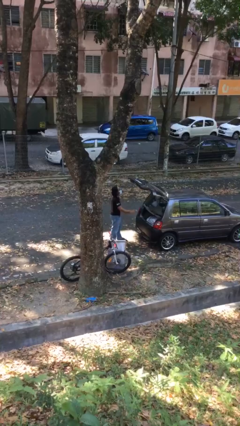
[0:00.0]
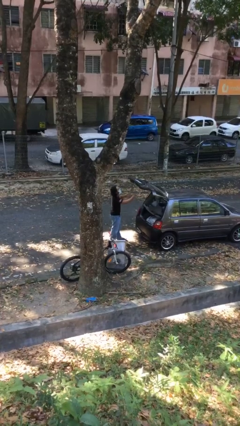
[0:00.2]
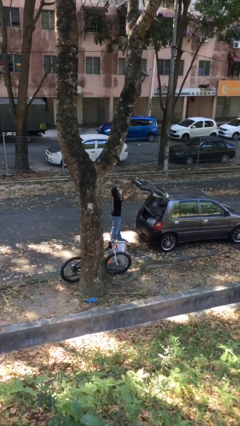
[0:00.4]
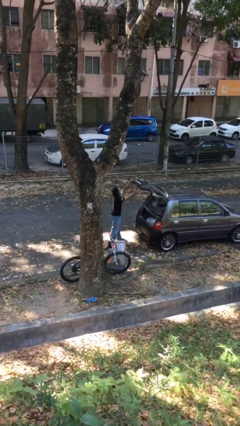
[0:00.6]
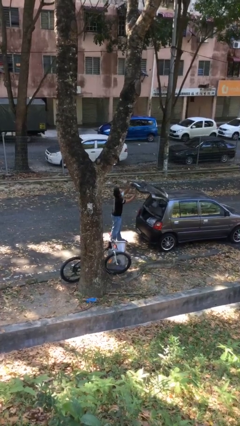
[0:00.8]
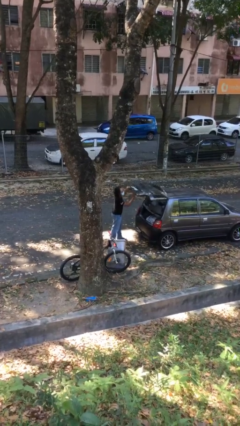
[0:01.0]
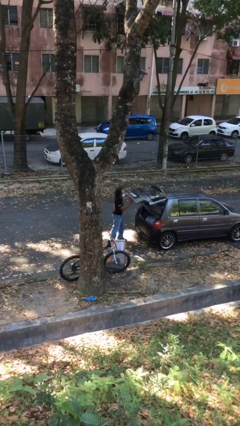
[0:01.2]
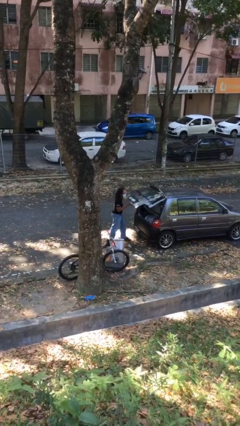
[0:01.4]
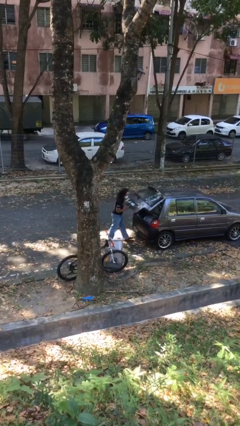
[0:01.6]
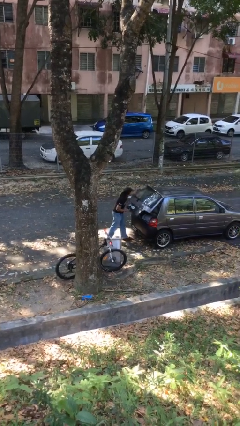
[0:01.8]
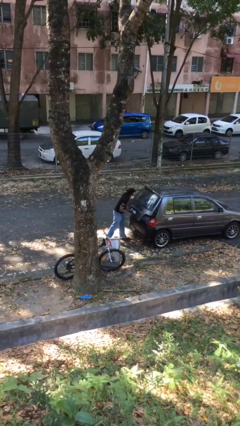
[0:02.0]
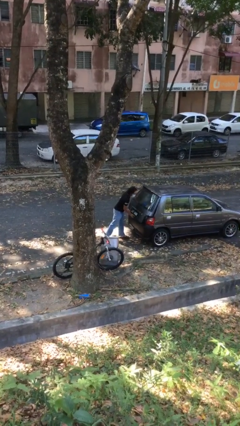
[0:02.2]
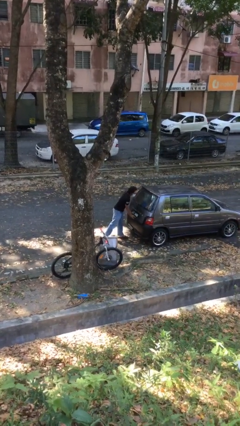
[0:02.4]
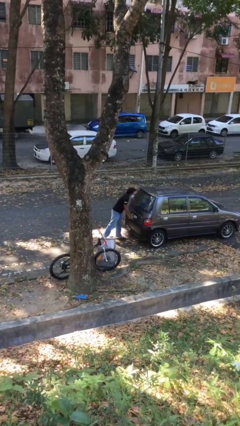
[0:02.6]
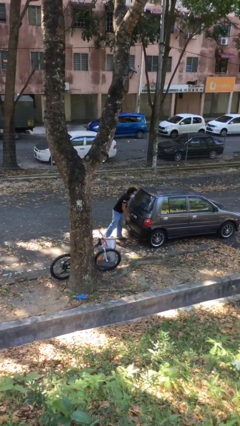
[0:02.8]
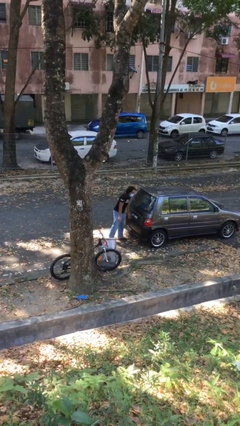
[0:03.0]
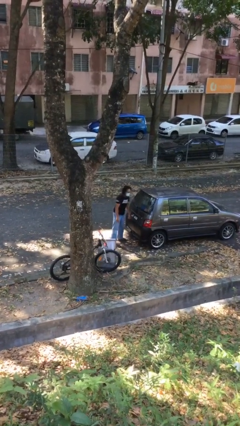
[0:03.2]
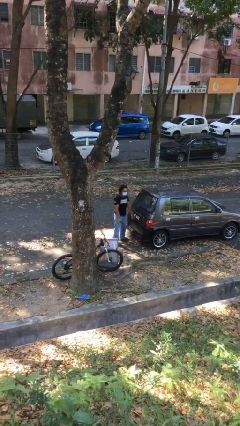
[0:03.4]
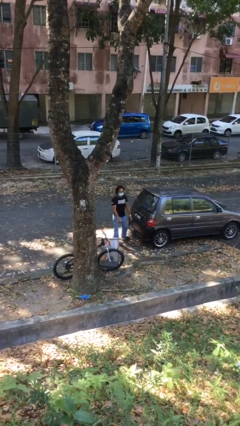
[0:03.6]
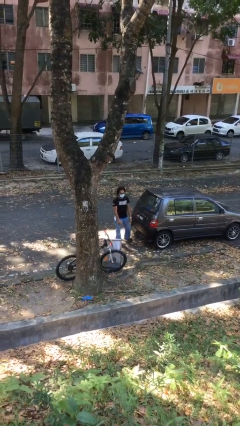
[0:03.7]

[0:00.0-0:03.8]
person closes car trunk

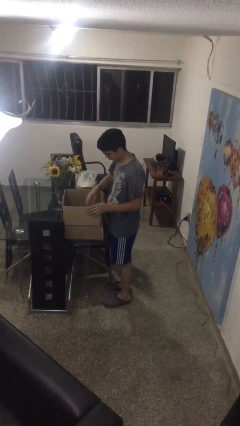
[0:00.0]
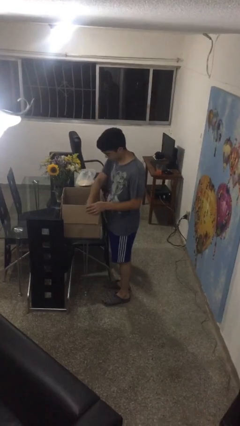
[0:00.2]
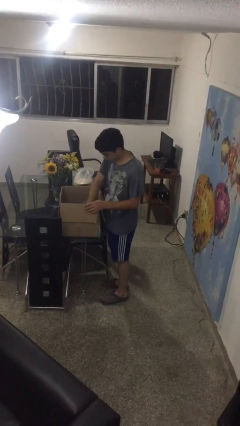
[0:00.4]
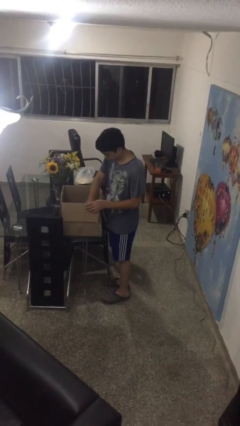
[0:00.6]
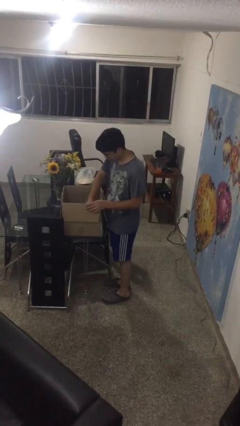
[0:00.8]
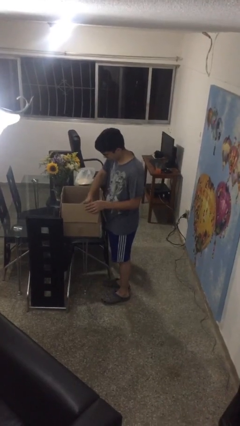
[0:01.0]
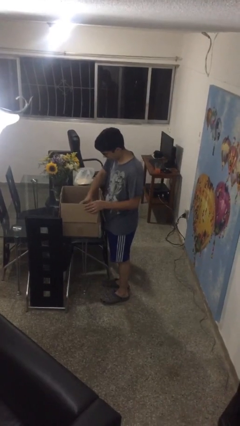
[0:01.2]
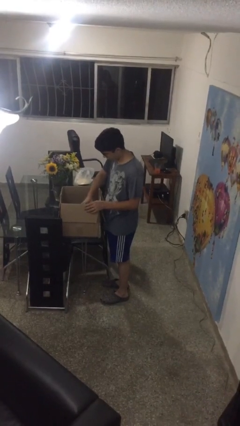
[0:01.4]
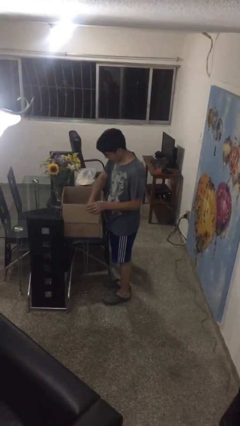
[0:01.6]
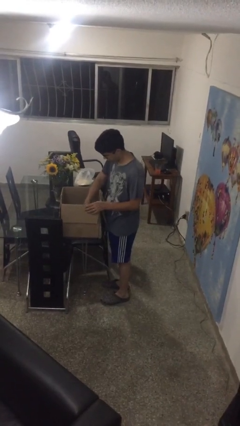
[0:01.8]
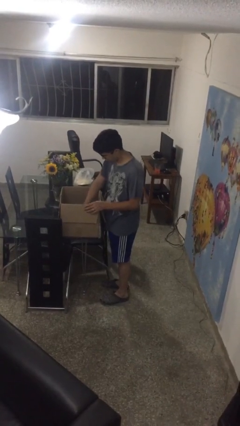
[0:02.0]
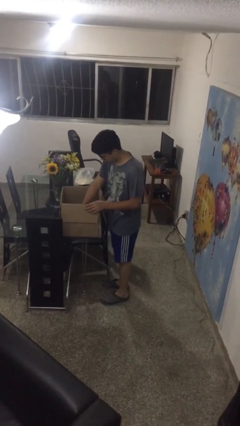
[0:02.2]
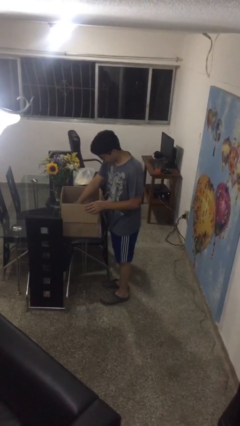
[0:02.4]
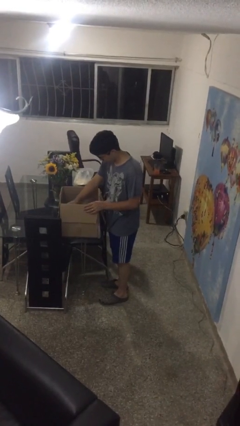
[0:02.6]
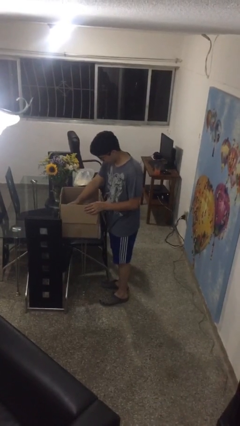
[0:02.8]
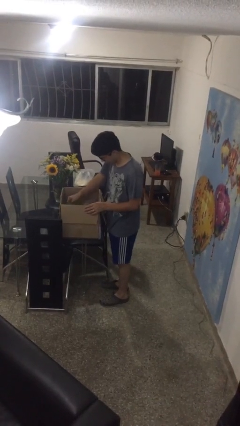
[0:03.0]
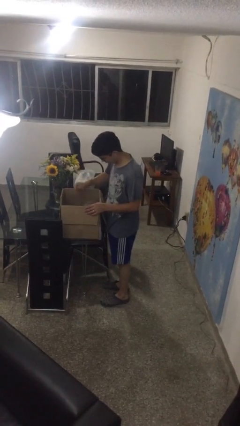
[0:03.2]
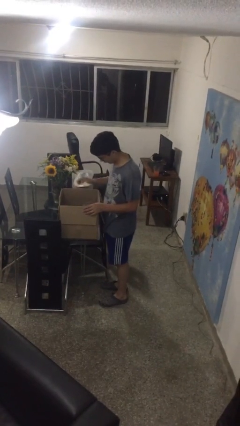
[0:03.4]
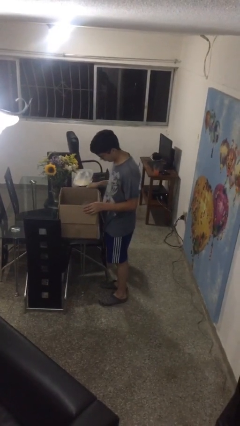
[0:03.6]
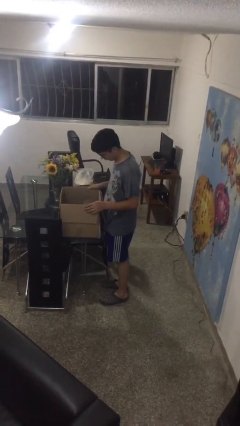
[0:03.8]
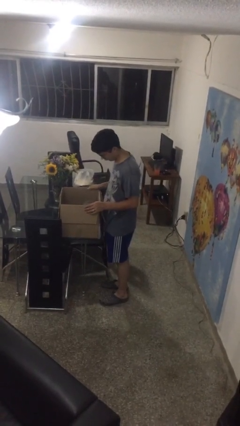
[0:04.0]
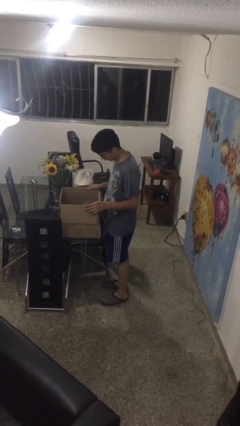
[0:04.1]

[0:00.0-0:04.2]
person searches in box

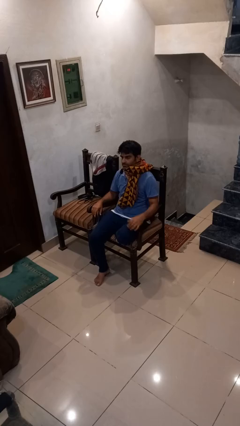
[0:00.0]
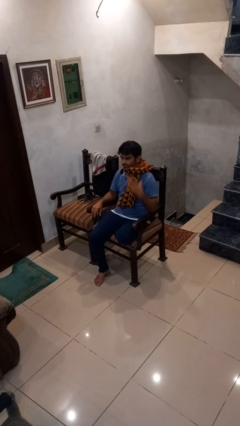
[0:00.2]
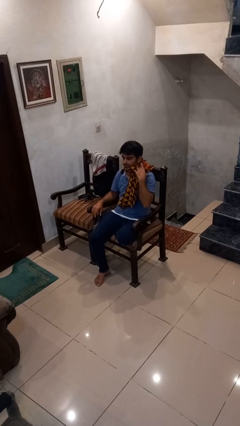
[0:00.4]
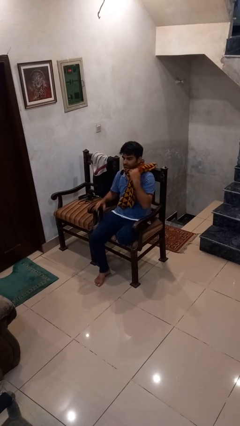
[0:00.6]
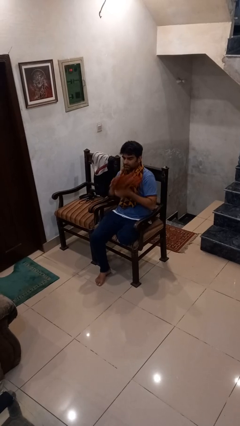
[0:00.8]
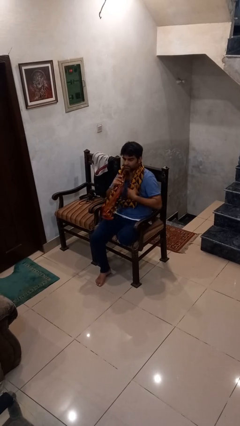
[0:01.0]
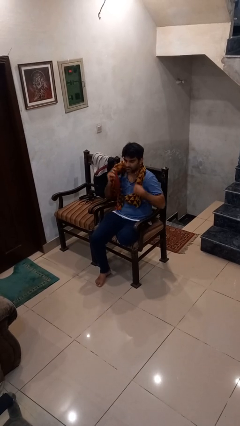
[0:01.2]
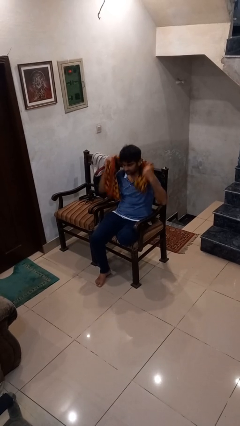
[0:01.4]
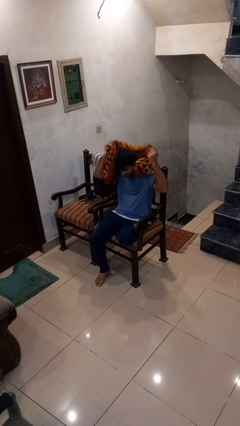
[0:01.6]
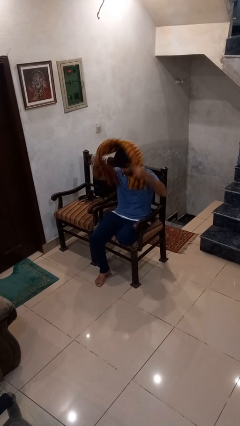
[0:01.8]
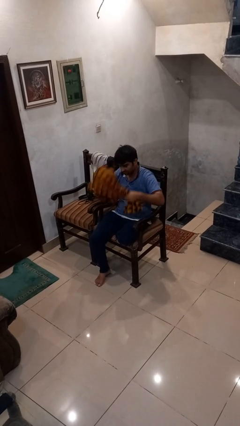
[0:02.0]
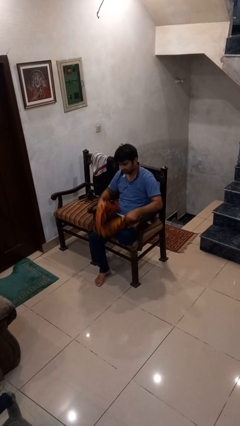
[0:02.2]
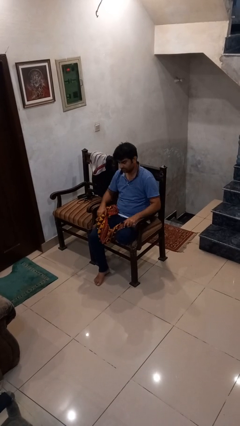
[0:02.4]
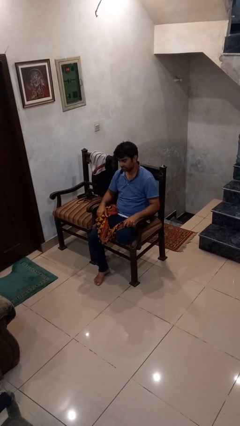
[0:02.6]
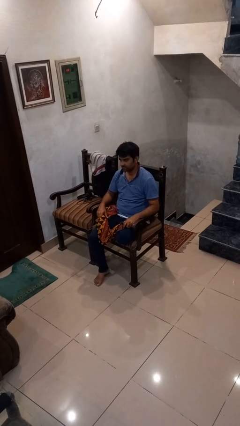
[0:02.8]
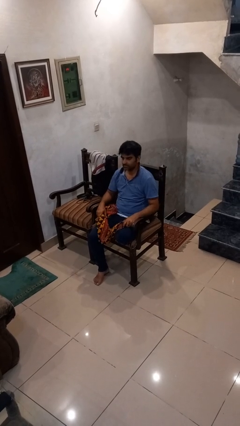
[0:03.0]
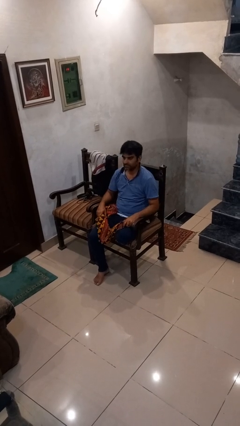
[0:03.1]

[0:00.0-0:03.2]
person takes off scarf

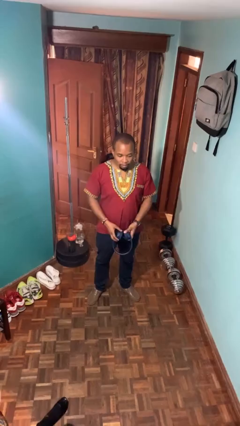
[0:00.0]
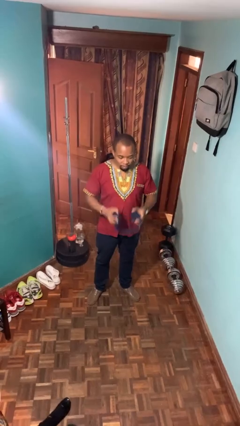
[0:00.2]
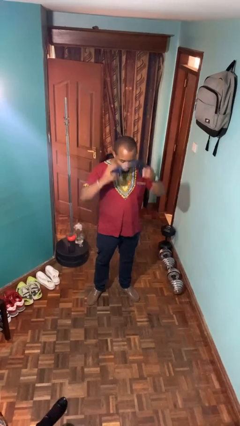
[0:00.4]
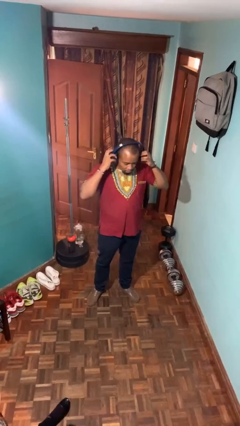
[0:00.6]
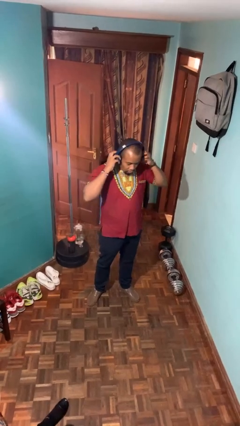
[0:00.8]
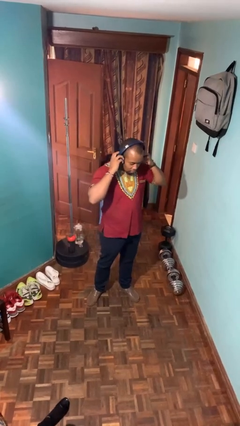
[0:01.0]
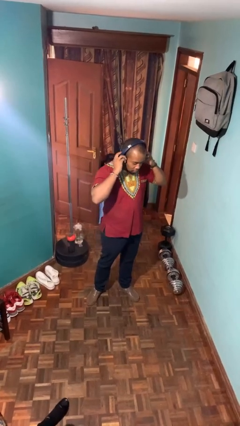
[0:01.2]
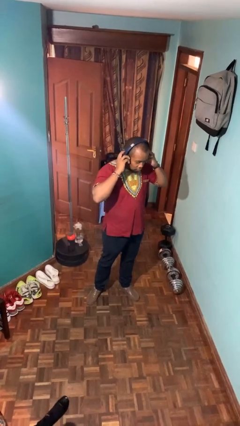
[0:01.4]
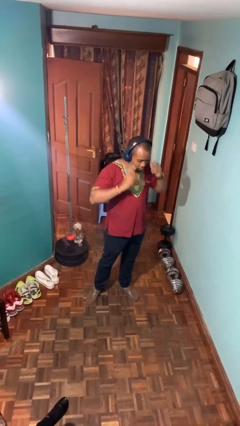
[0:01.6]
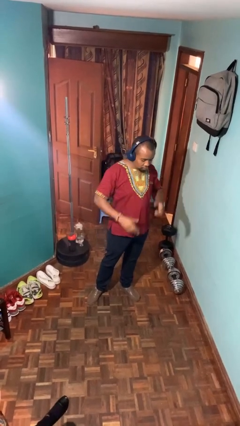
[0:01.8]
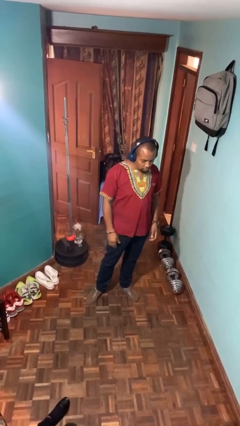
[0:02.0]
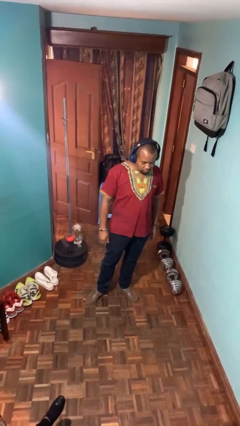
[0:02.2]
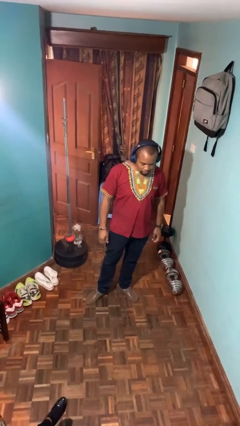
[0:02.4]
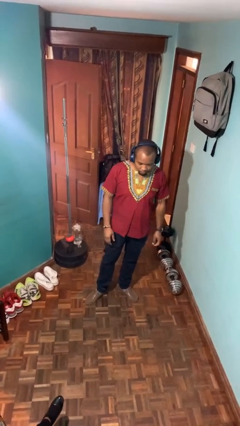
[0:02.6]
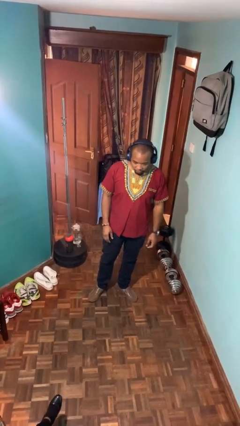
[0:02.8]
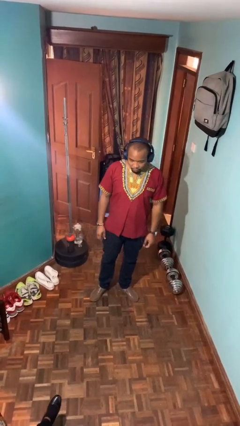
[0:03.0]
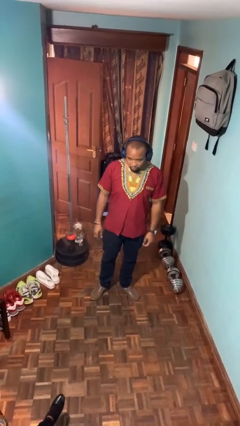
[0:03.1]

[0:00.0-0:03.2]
person puts on headphones

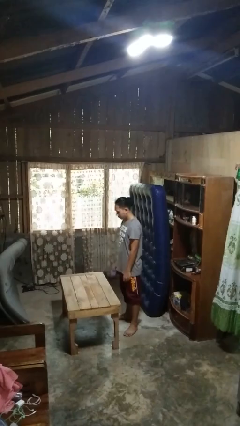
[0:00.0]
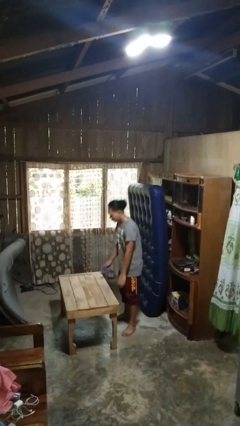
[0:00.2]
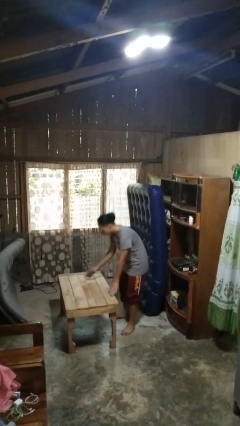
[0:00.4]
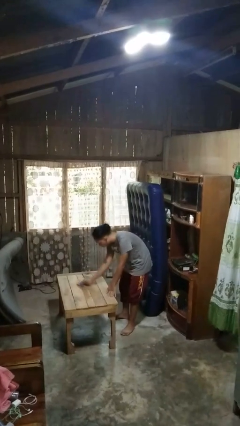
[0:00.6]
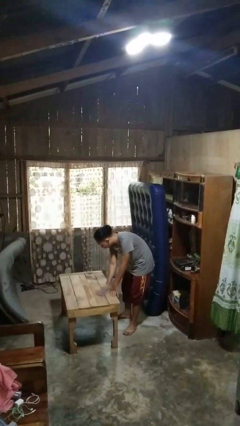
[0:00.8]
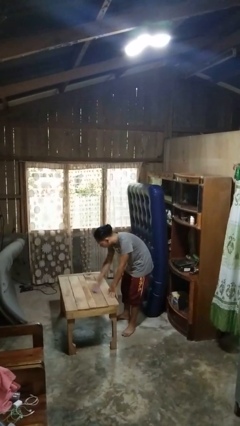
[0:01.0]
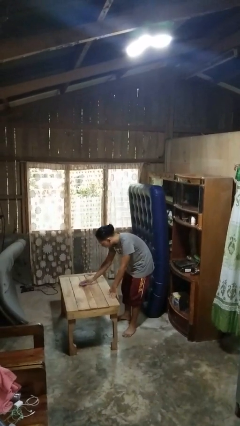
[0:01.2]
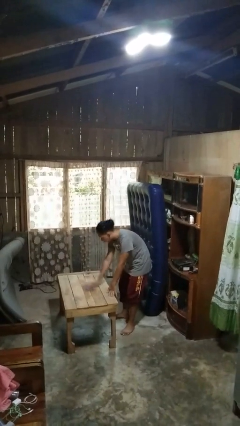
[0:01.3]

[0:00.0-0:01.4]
person cleans table with rag

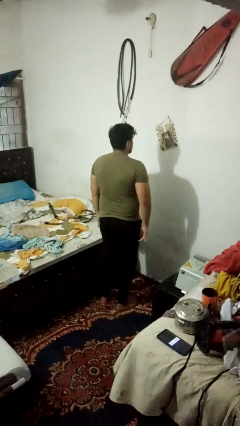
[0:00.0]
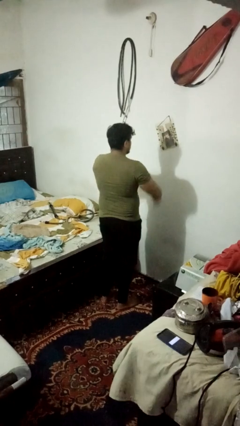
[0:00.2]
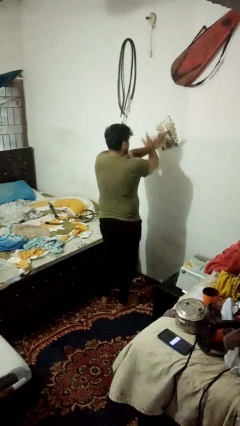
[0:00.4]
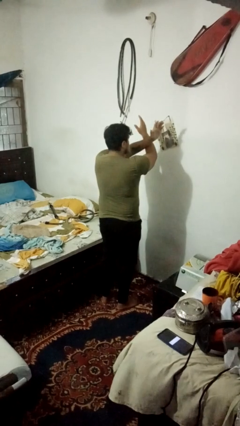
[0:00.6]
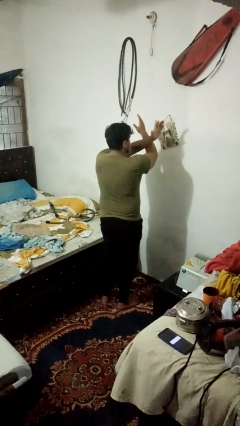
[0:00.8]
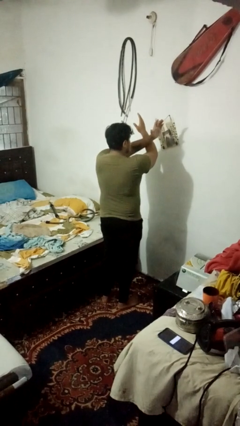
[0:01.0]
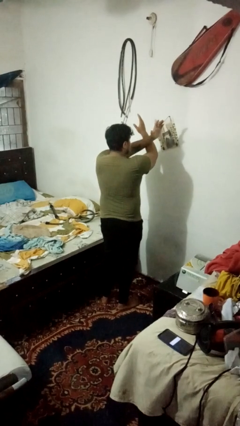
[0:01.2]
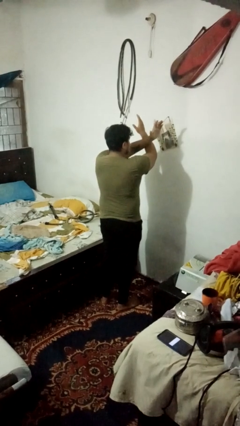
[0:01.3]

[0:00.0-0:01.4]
person gestures arms x
